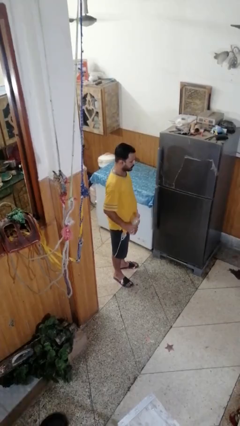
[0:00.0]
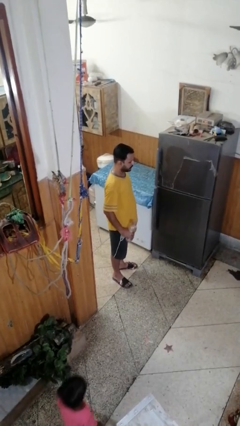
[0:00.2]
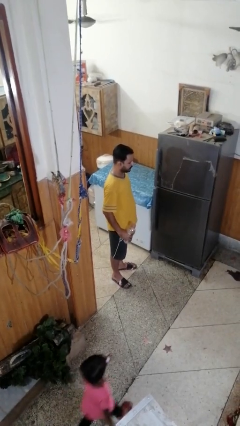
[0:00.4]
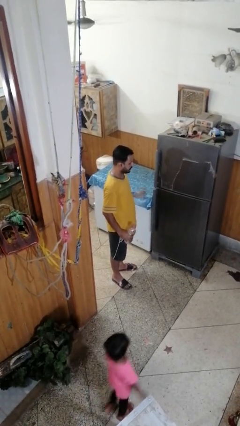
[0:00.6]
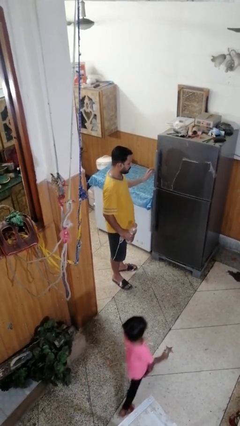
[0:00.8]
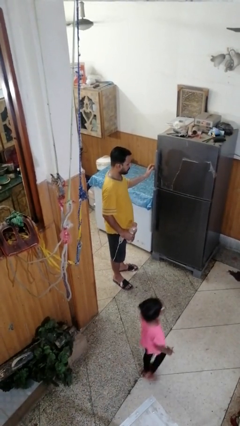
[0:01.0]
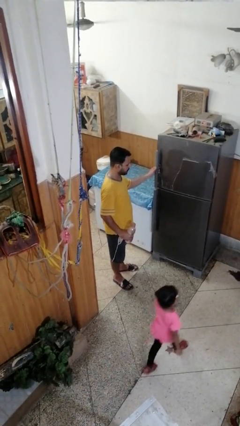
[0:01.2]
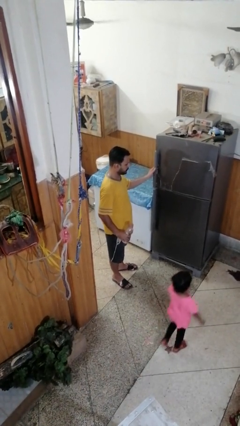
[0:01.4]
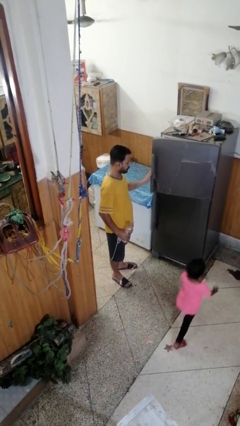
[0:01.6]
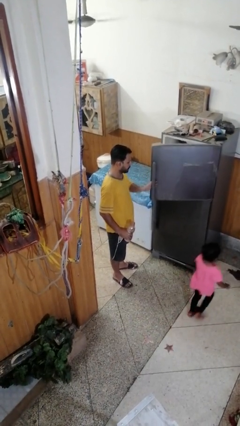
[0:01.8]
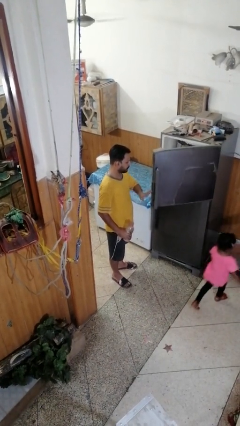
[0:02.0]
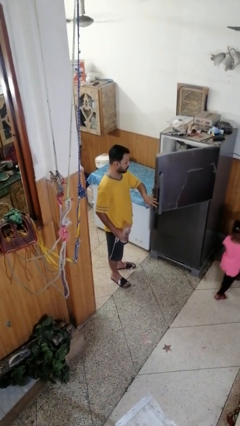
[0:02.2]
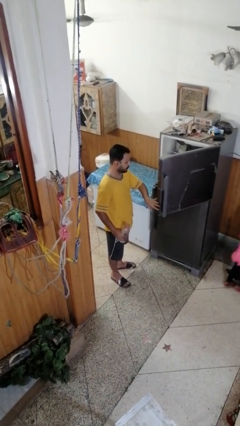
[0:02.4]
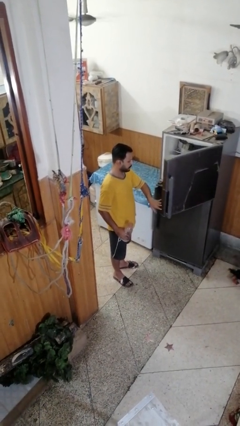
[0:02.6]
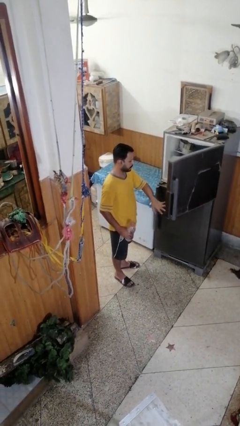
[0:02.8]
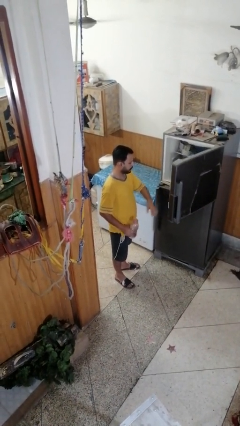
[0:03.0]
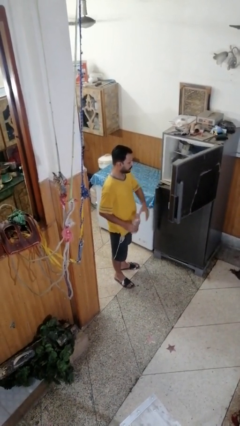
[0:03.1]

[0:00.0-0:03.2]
person opens refrigerator

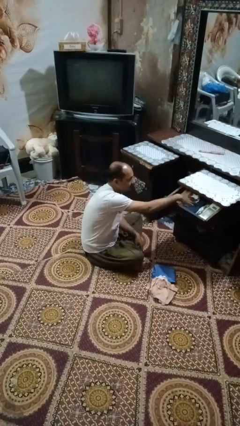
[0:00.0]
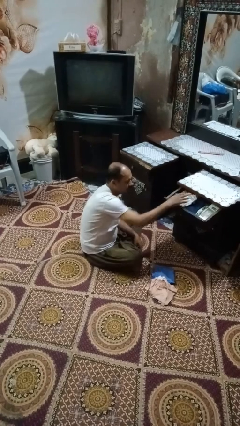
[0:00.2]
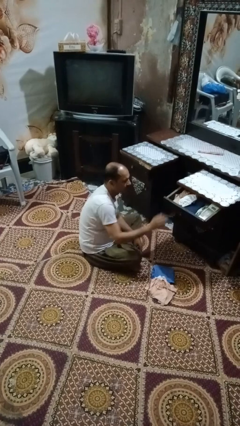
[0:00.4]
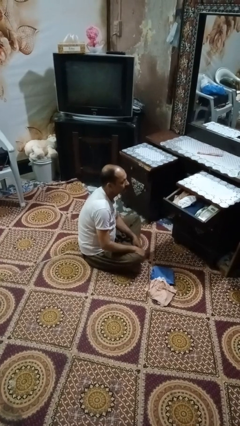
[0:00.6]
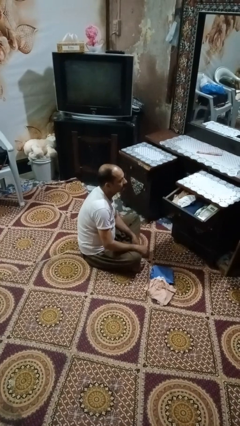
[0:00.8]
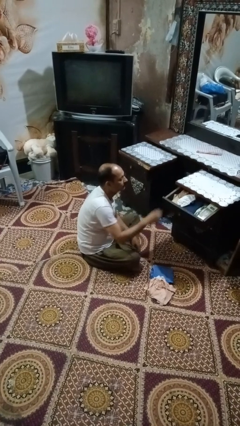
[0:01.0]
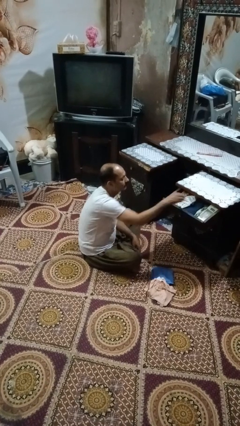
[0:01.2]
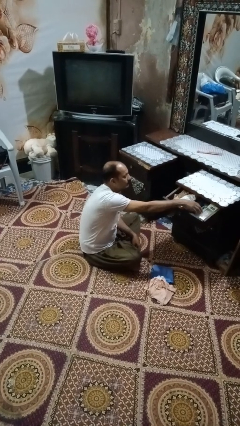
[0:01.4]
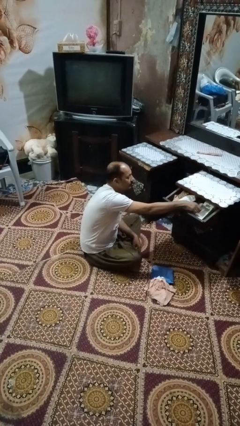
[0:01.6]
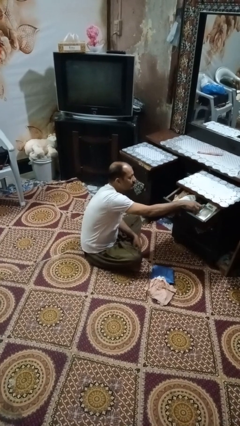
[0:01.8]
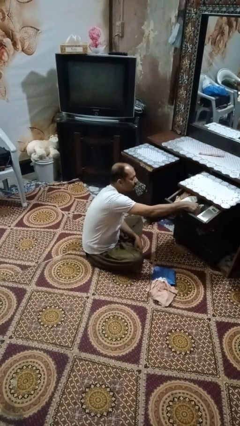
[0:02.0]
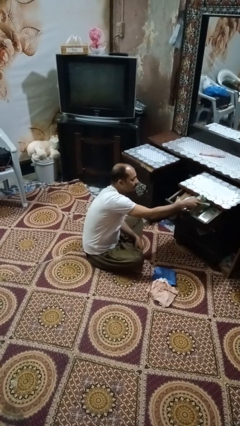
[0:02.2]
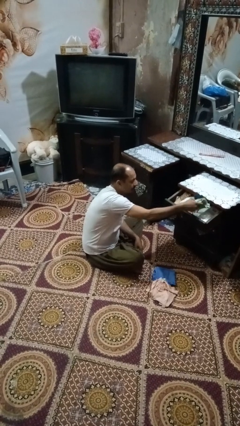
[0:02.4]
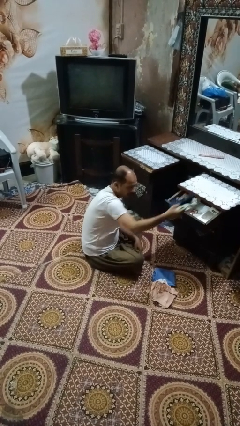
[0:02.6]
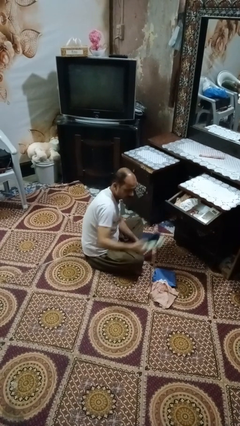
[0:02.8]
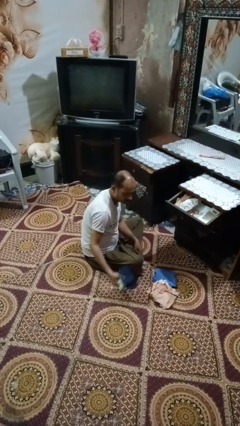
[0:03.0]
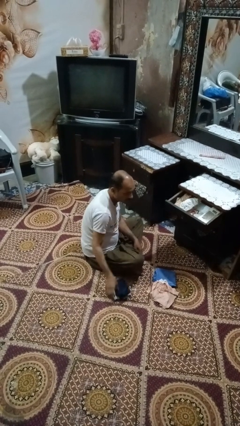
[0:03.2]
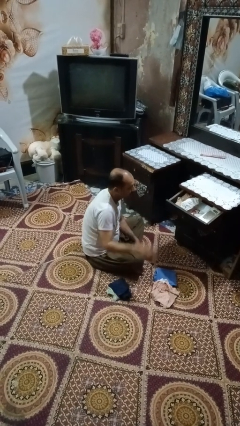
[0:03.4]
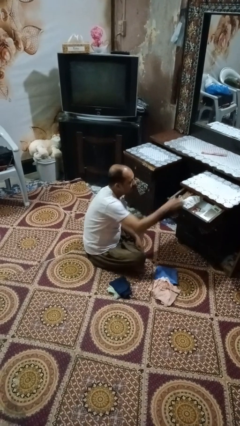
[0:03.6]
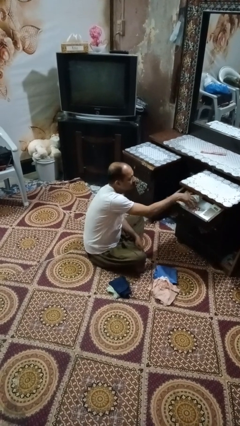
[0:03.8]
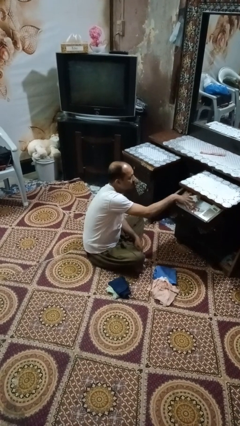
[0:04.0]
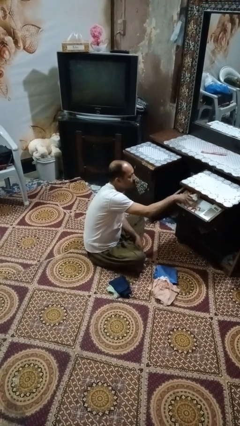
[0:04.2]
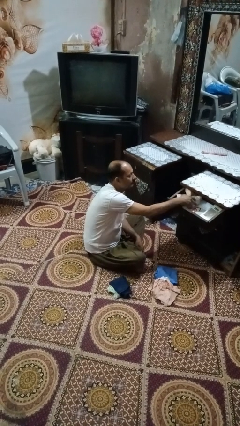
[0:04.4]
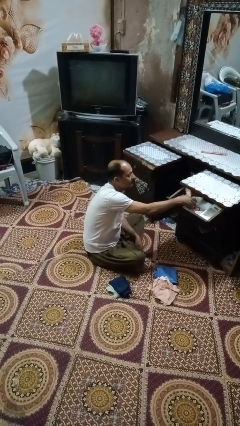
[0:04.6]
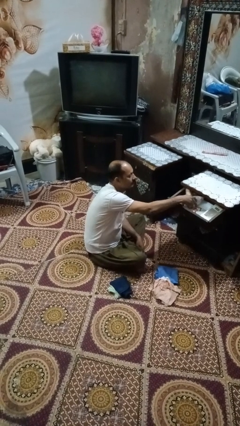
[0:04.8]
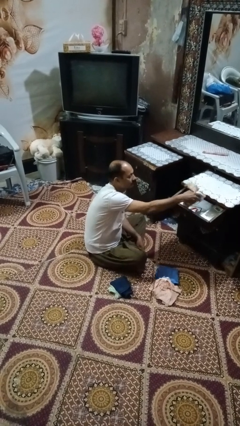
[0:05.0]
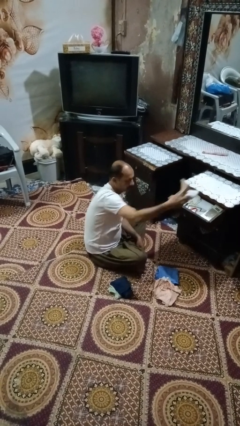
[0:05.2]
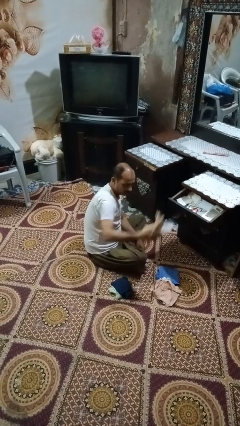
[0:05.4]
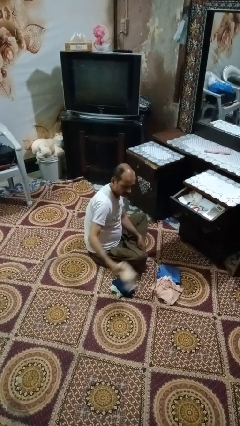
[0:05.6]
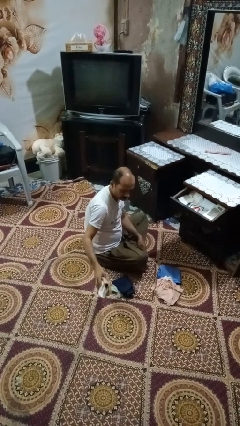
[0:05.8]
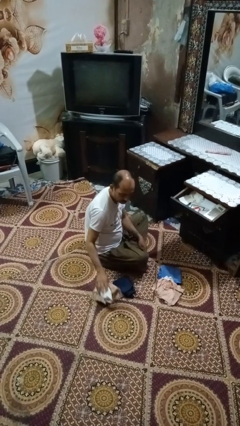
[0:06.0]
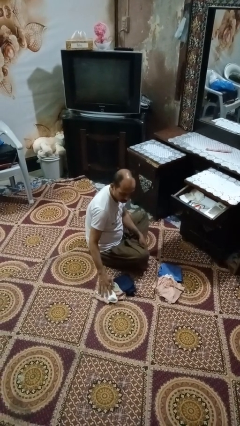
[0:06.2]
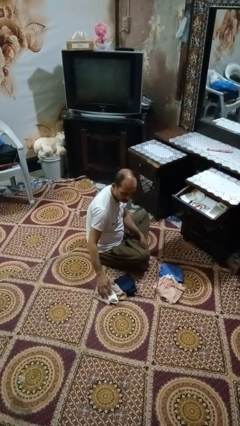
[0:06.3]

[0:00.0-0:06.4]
person takes clothes from dresser

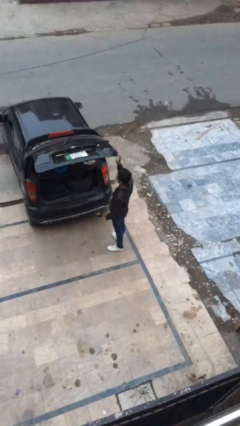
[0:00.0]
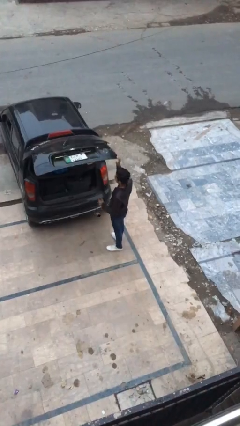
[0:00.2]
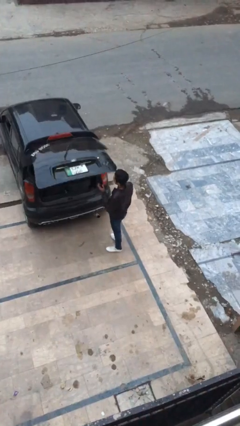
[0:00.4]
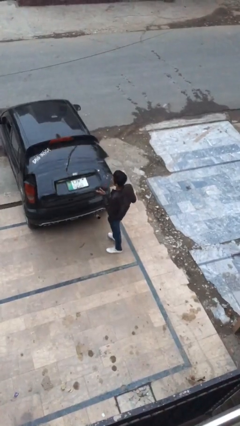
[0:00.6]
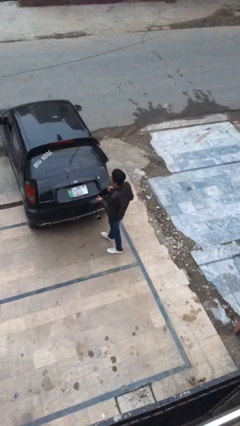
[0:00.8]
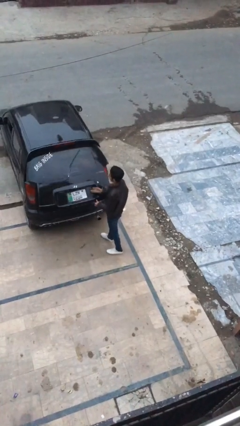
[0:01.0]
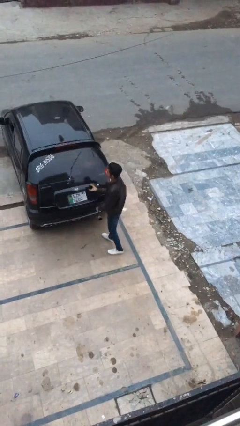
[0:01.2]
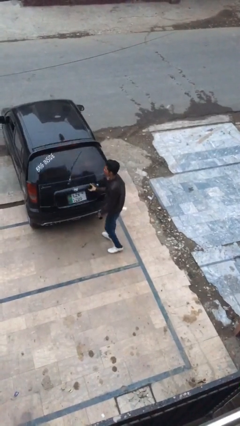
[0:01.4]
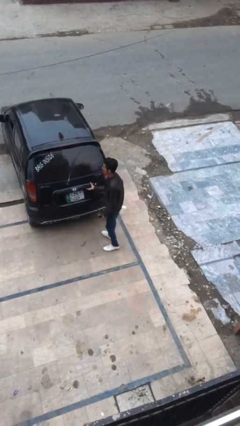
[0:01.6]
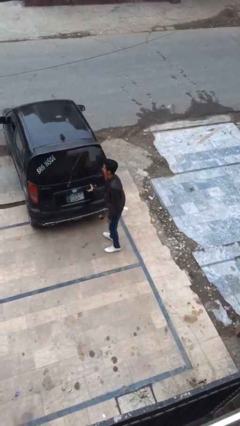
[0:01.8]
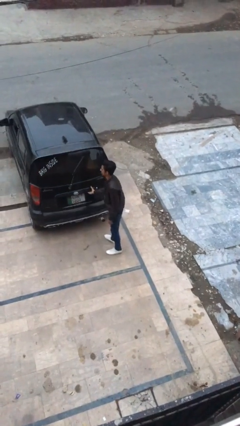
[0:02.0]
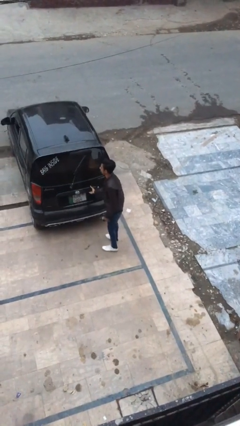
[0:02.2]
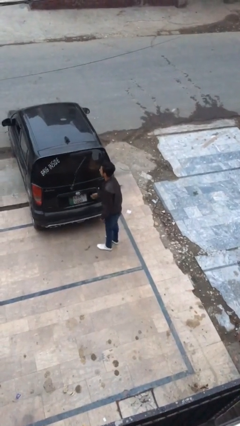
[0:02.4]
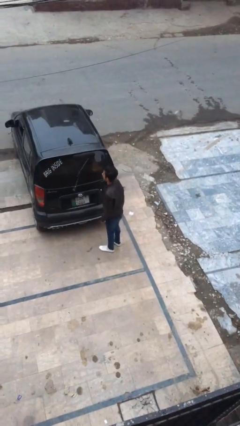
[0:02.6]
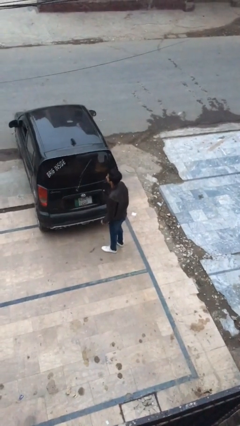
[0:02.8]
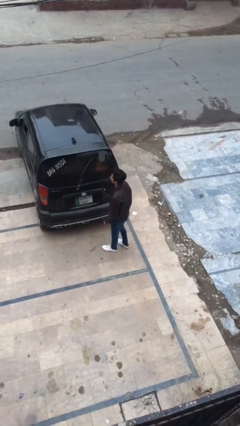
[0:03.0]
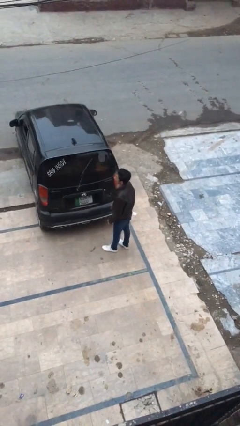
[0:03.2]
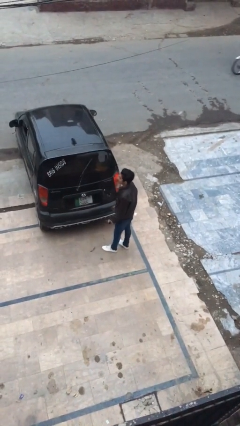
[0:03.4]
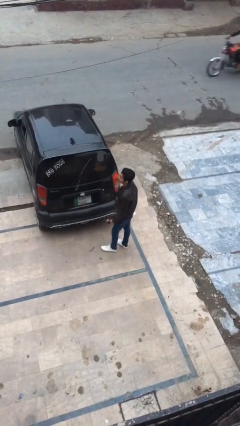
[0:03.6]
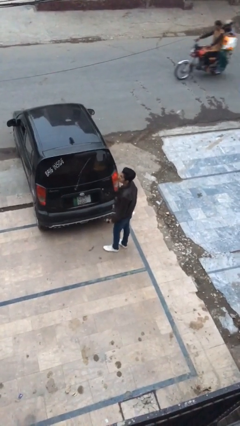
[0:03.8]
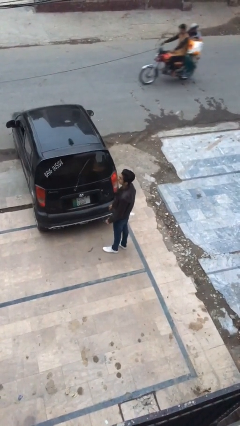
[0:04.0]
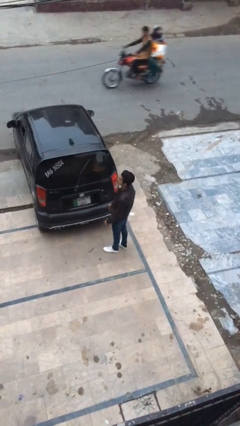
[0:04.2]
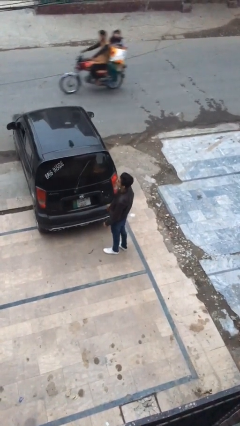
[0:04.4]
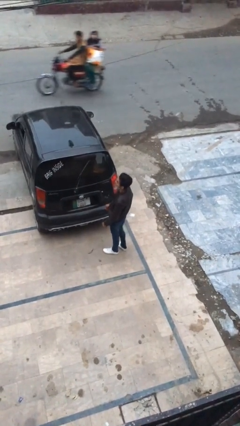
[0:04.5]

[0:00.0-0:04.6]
person closes car trunk

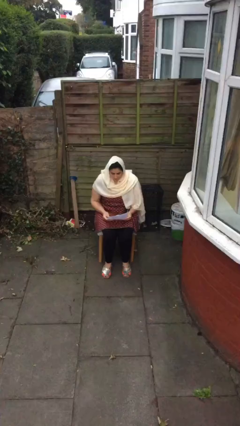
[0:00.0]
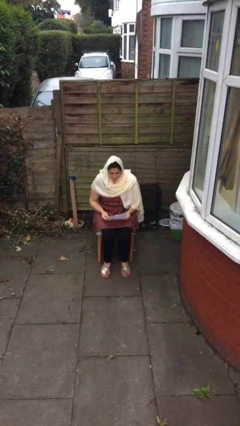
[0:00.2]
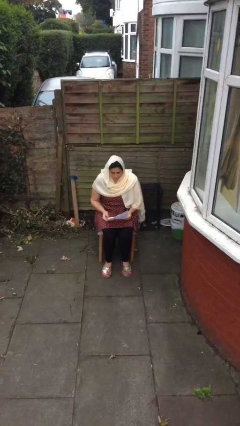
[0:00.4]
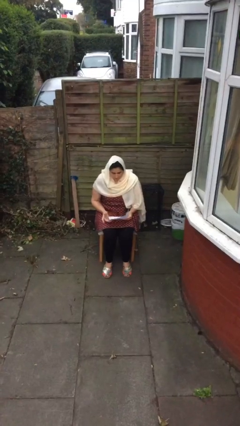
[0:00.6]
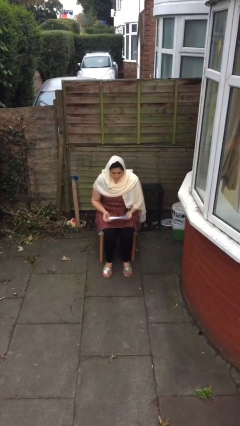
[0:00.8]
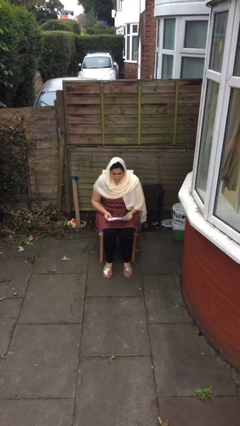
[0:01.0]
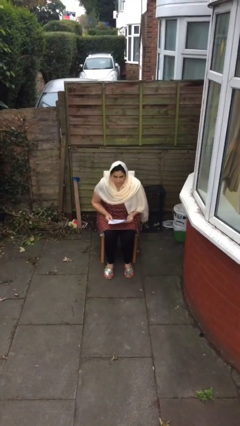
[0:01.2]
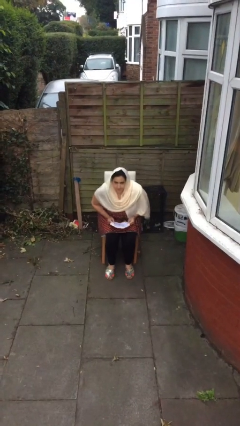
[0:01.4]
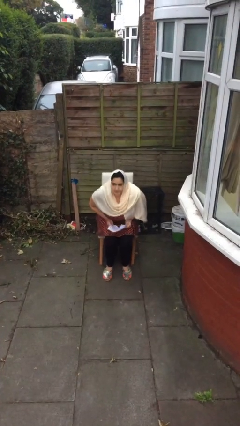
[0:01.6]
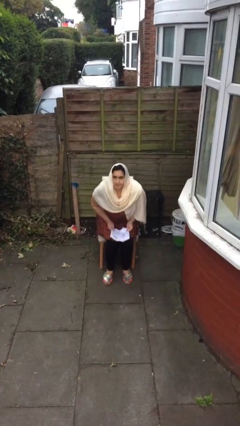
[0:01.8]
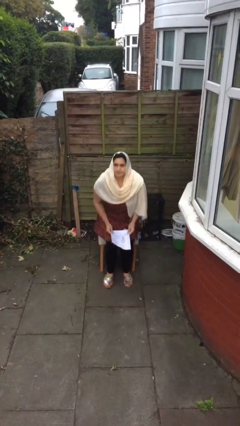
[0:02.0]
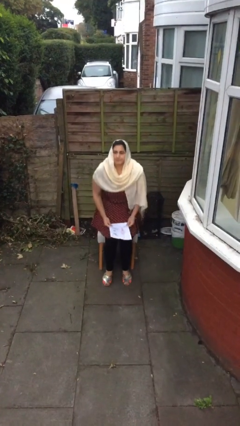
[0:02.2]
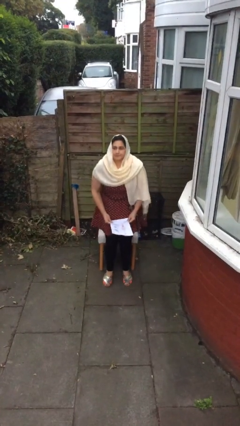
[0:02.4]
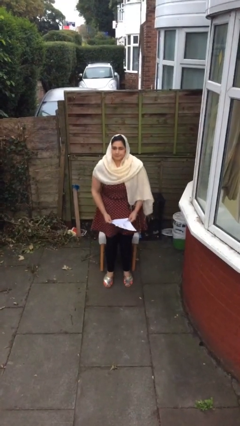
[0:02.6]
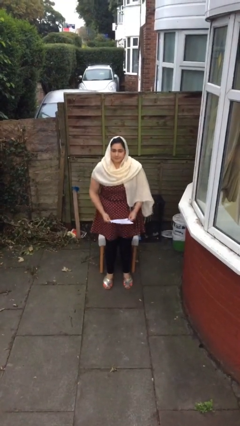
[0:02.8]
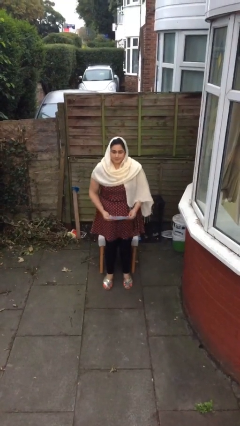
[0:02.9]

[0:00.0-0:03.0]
person stands up

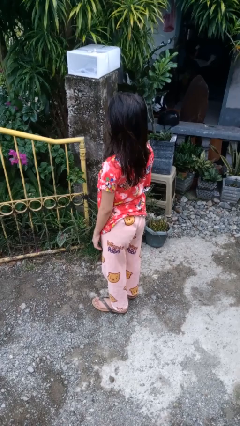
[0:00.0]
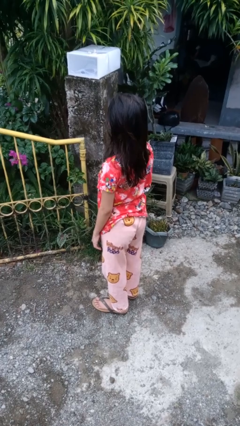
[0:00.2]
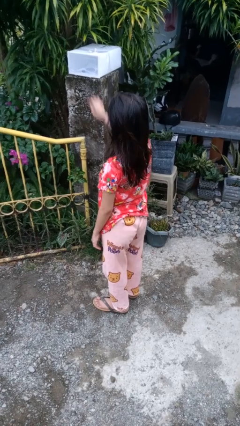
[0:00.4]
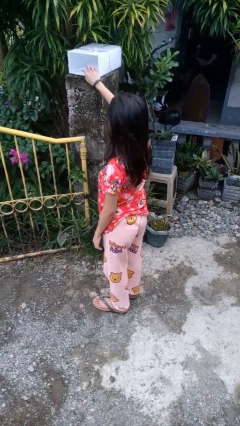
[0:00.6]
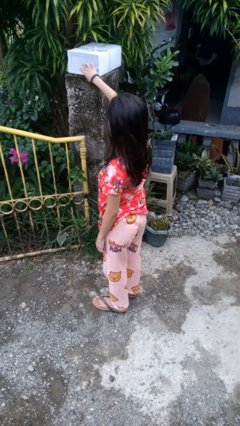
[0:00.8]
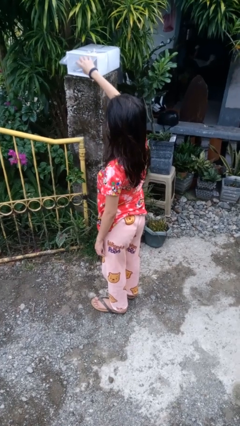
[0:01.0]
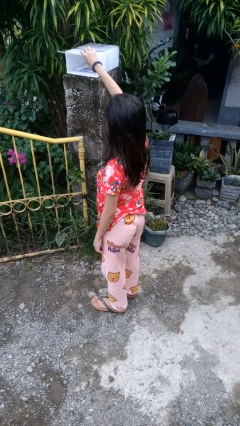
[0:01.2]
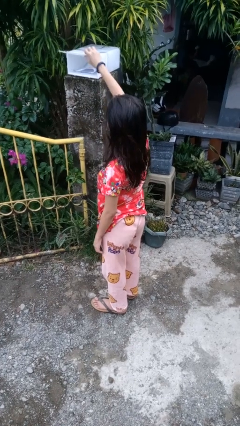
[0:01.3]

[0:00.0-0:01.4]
person opens mailbox
